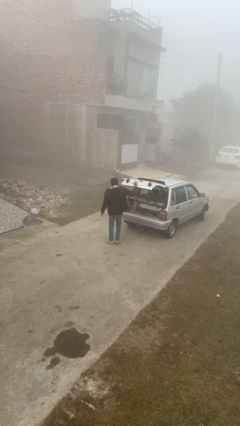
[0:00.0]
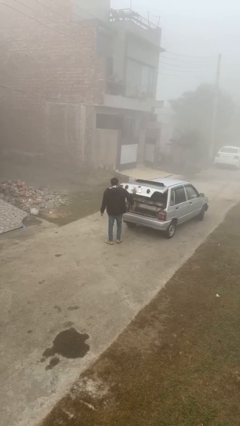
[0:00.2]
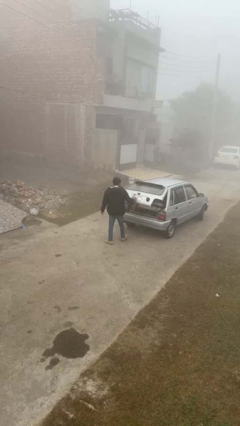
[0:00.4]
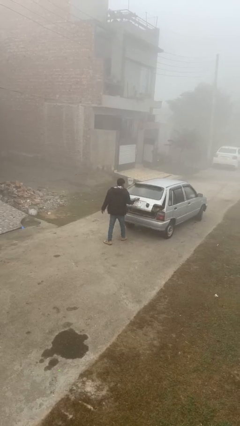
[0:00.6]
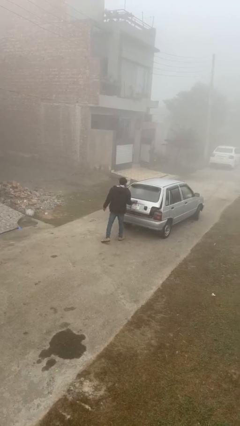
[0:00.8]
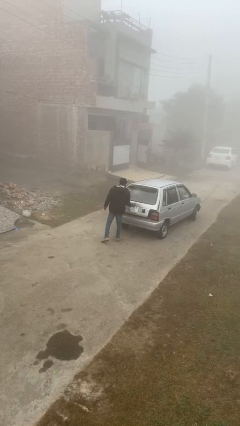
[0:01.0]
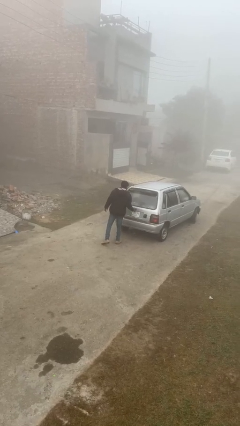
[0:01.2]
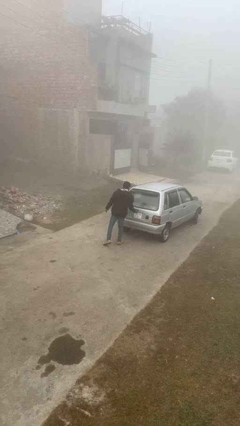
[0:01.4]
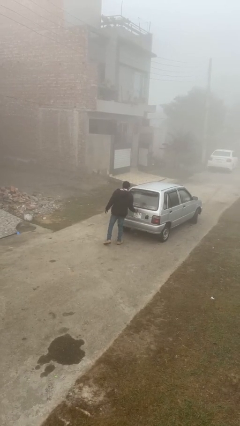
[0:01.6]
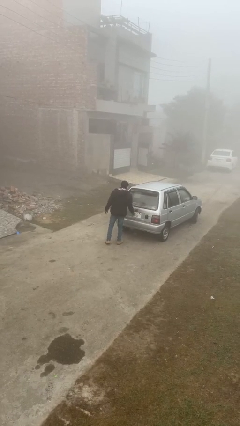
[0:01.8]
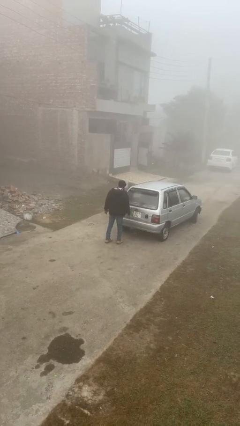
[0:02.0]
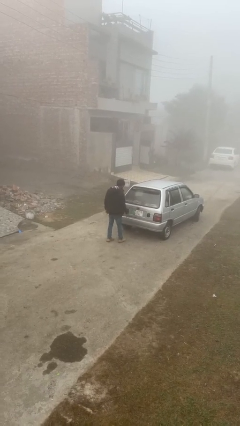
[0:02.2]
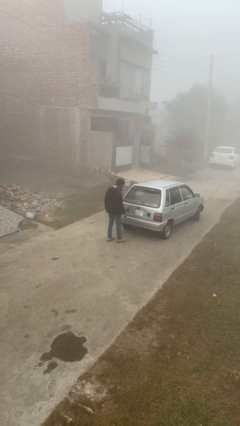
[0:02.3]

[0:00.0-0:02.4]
person closes car trunk

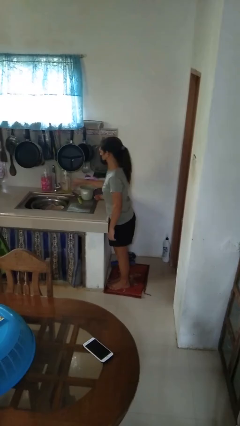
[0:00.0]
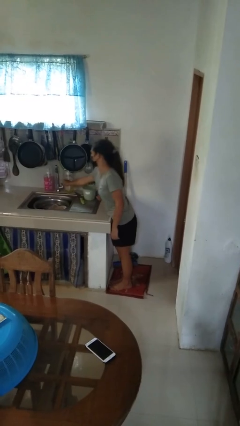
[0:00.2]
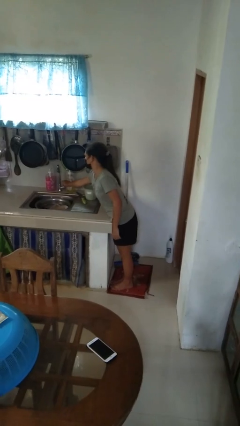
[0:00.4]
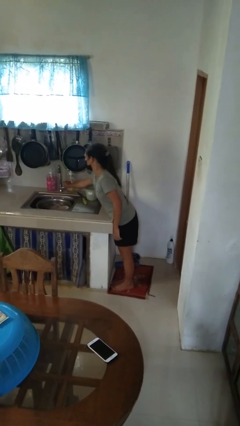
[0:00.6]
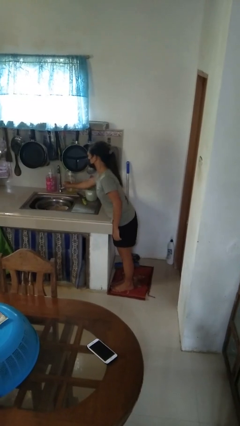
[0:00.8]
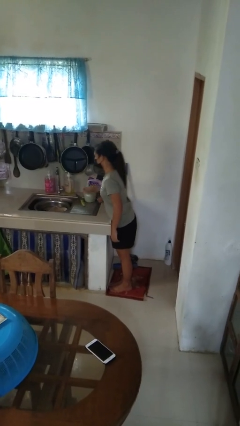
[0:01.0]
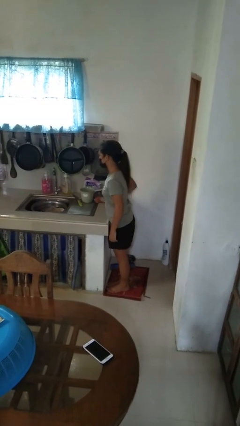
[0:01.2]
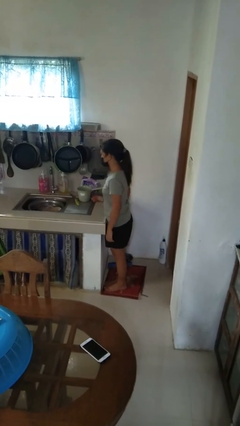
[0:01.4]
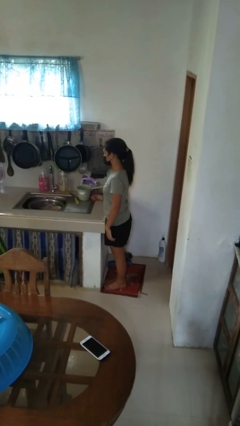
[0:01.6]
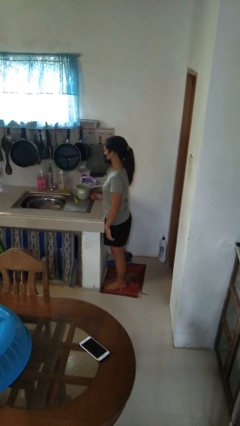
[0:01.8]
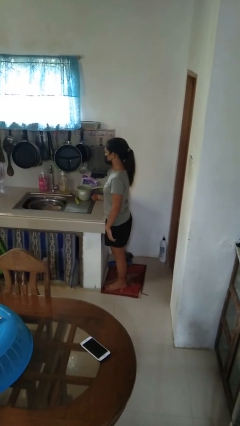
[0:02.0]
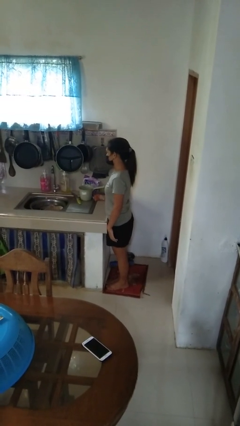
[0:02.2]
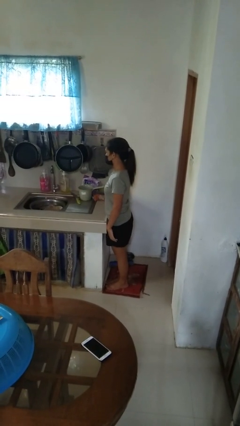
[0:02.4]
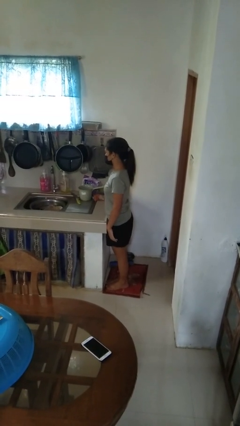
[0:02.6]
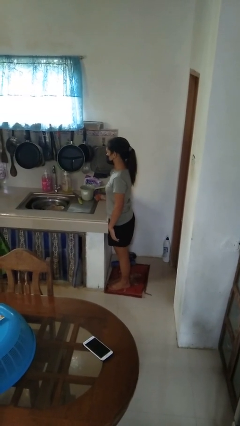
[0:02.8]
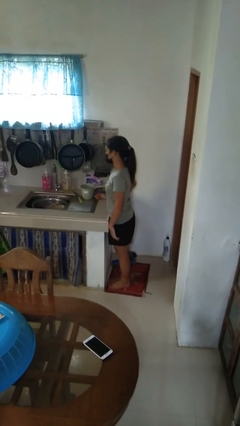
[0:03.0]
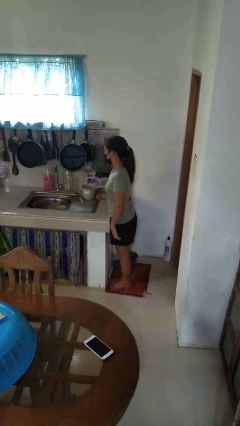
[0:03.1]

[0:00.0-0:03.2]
person turns on faucet

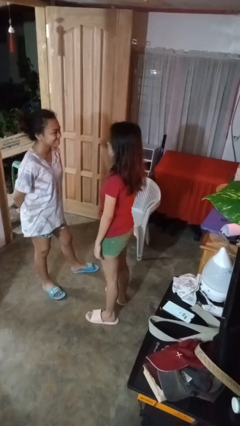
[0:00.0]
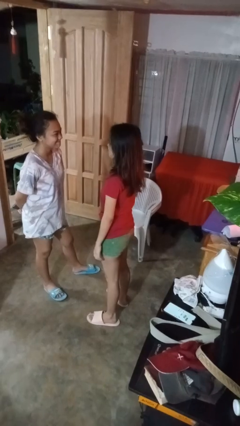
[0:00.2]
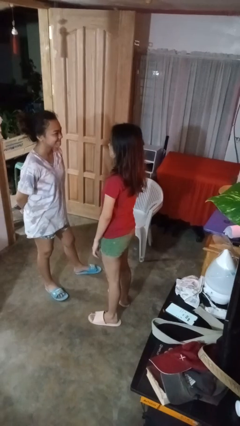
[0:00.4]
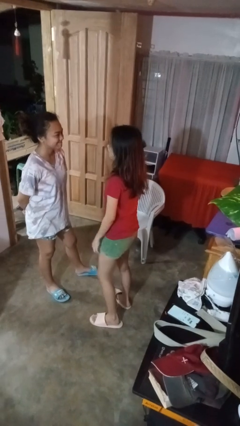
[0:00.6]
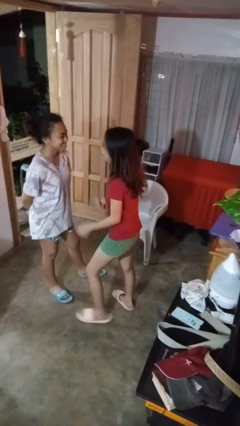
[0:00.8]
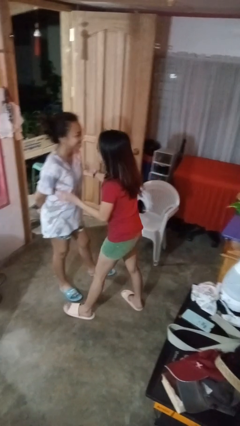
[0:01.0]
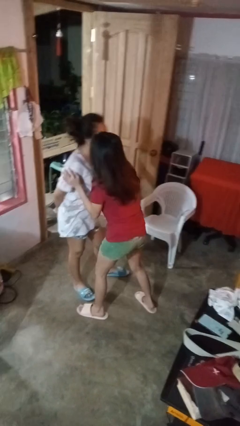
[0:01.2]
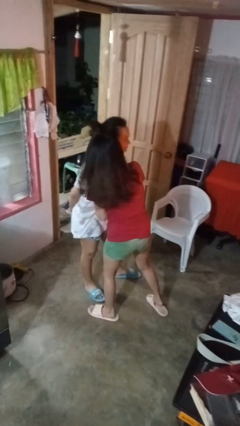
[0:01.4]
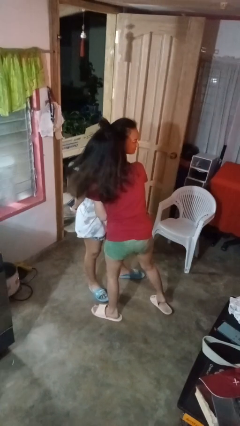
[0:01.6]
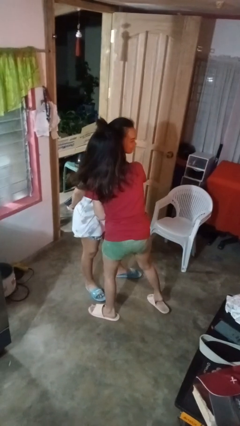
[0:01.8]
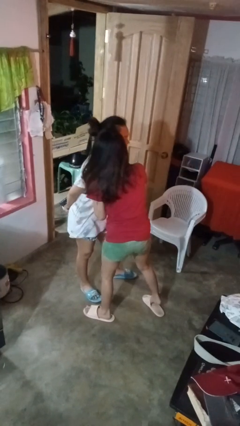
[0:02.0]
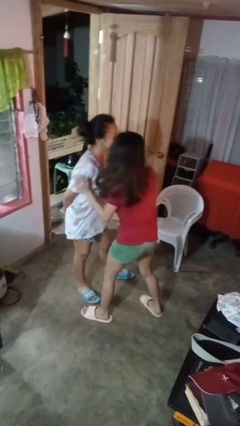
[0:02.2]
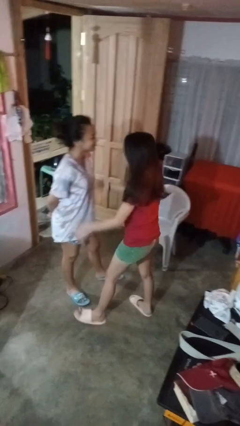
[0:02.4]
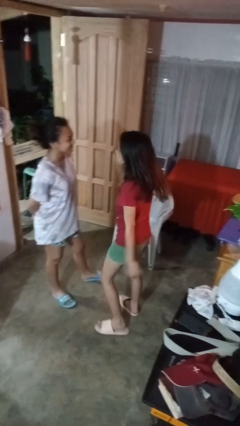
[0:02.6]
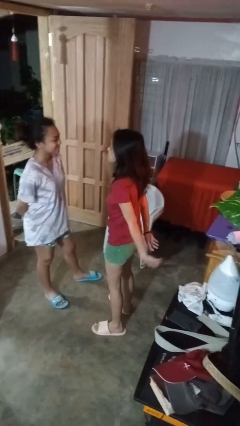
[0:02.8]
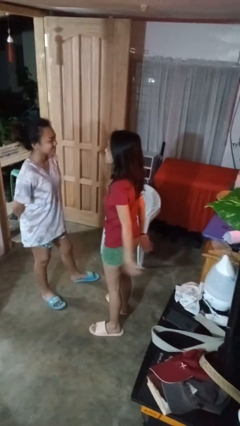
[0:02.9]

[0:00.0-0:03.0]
person kisses cheek of person

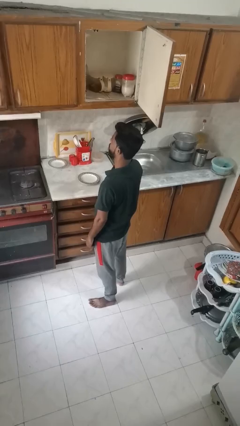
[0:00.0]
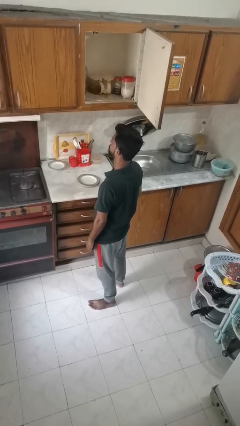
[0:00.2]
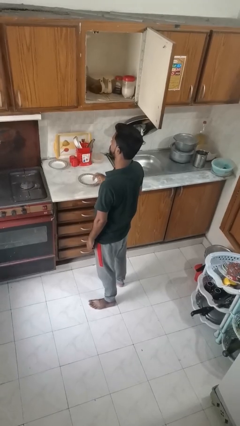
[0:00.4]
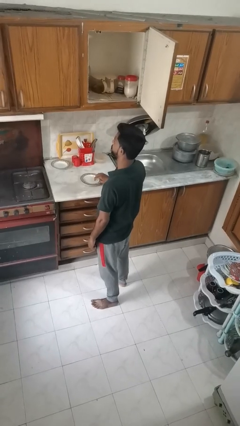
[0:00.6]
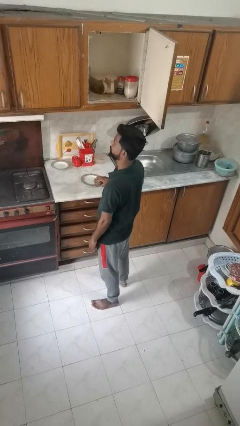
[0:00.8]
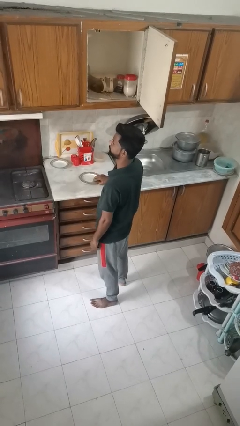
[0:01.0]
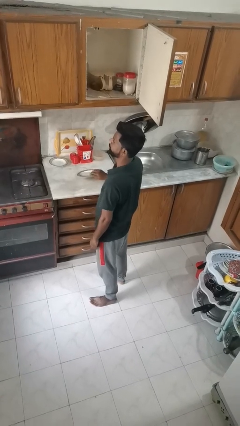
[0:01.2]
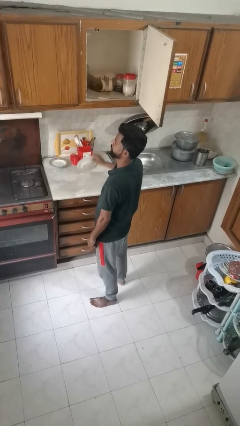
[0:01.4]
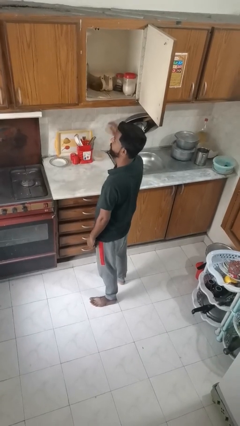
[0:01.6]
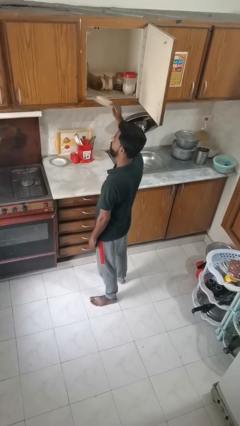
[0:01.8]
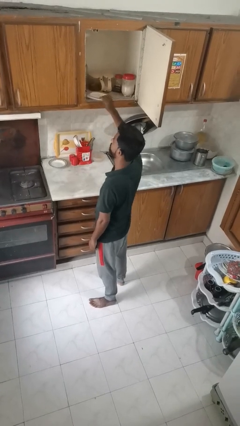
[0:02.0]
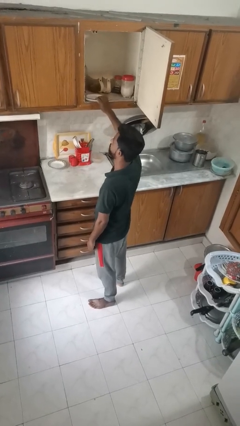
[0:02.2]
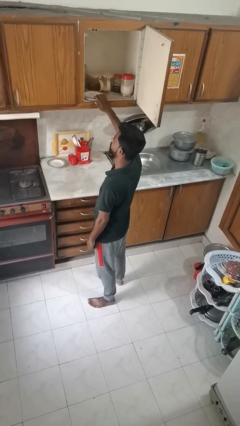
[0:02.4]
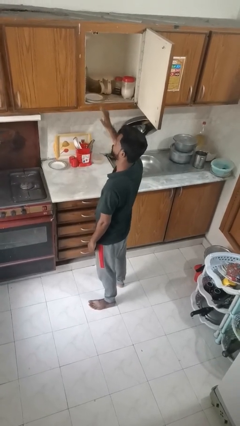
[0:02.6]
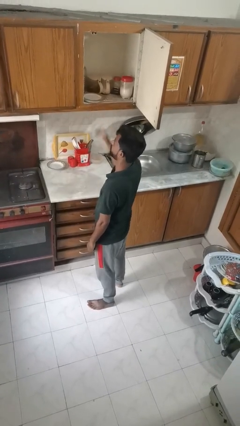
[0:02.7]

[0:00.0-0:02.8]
person puts object in cabinet

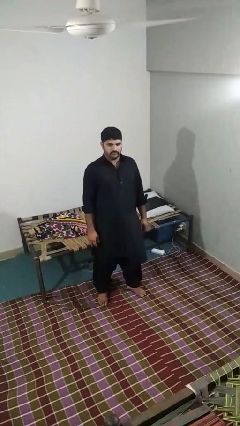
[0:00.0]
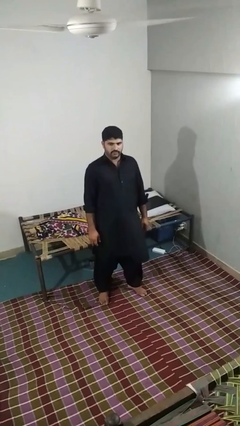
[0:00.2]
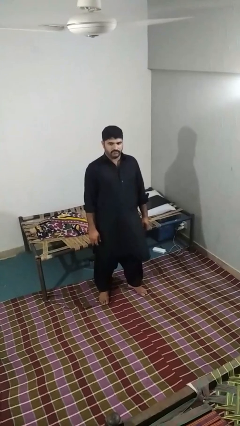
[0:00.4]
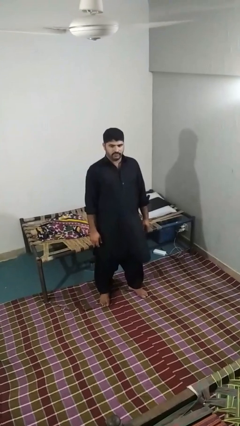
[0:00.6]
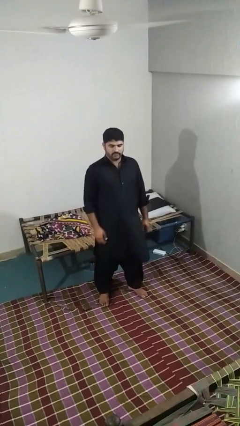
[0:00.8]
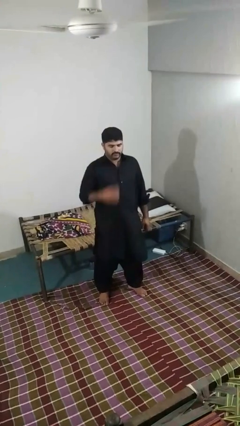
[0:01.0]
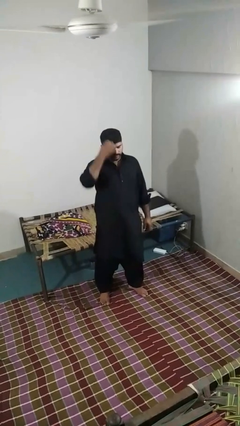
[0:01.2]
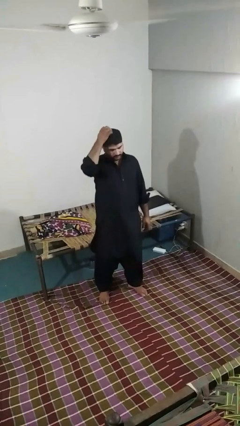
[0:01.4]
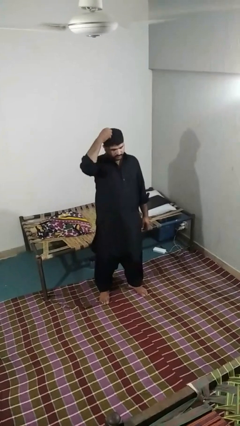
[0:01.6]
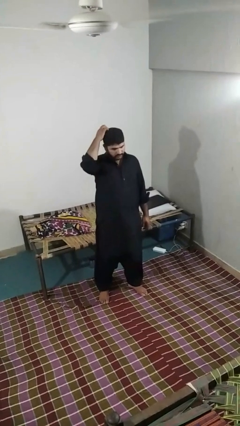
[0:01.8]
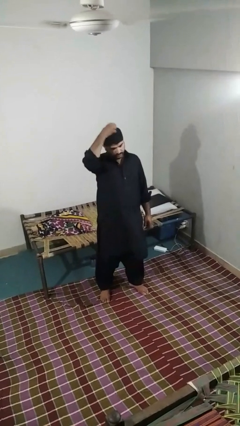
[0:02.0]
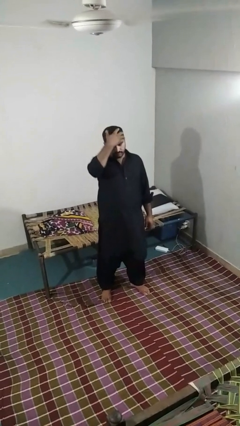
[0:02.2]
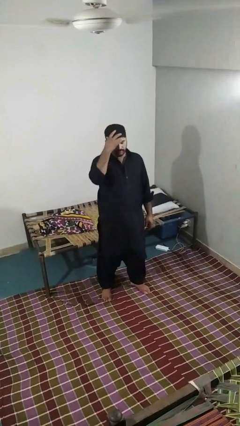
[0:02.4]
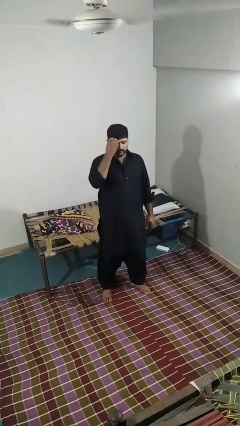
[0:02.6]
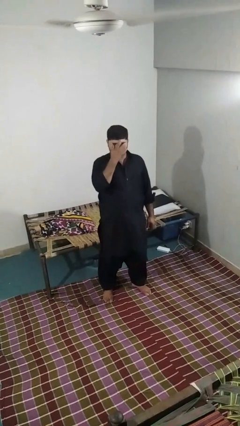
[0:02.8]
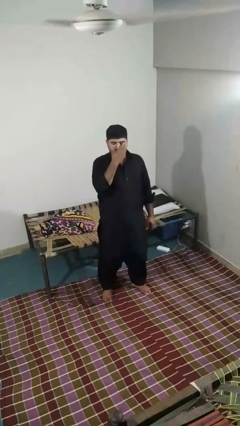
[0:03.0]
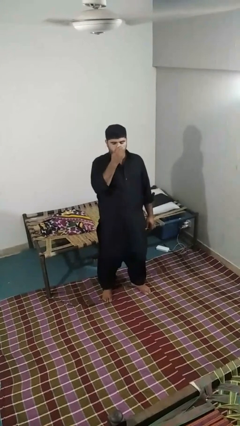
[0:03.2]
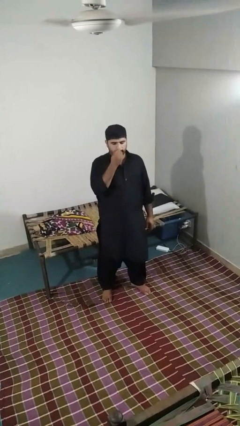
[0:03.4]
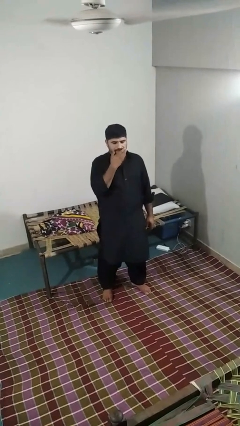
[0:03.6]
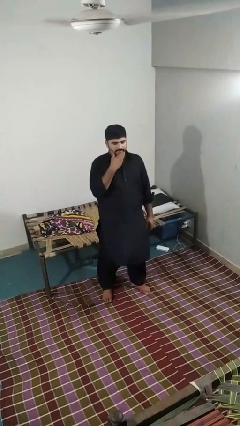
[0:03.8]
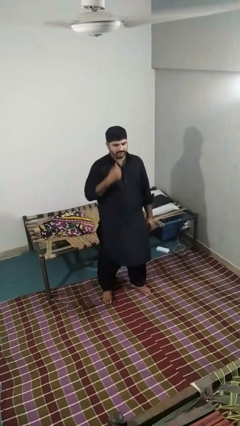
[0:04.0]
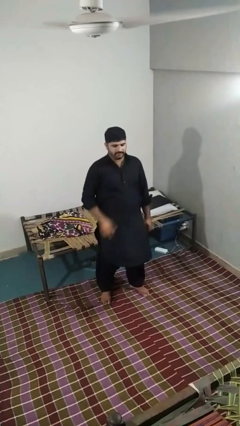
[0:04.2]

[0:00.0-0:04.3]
person scratches face

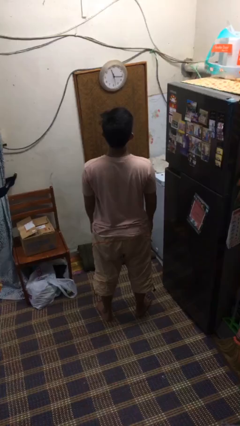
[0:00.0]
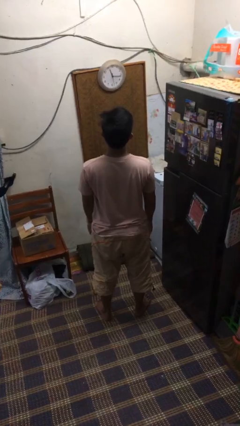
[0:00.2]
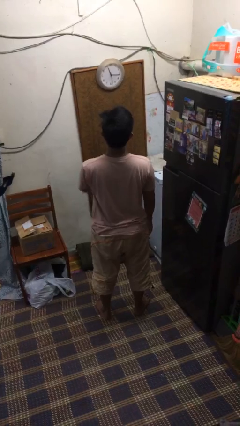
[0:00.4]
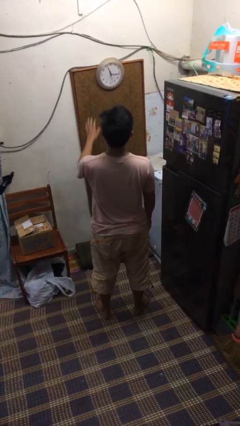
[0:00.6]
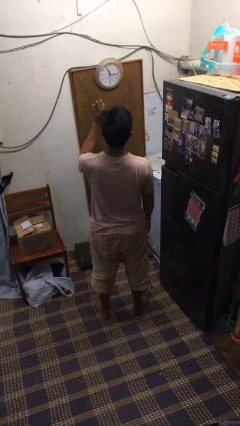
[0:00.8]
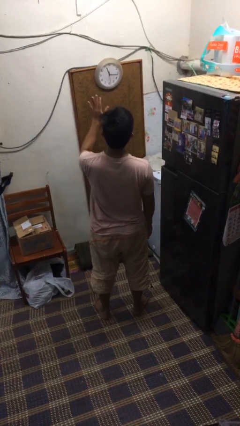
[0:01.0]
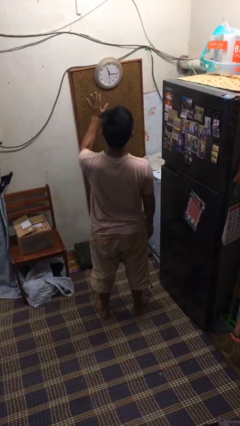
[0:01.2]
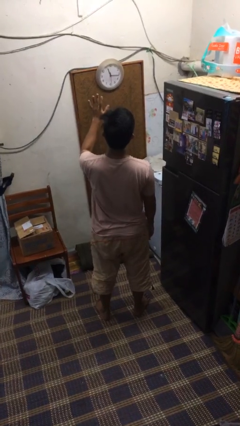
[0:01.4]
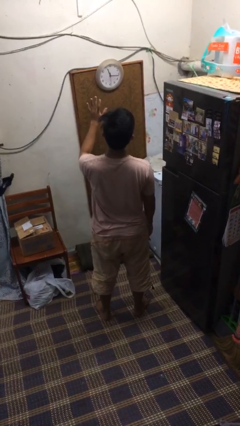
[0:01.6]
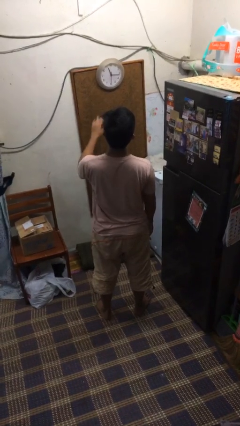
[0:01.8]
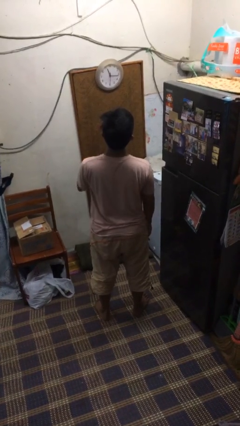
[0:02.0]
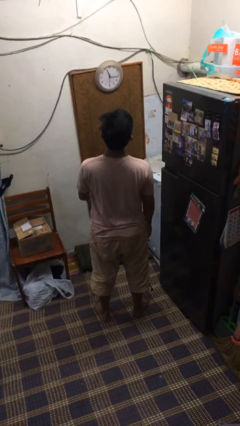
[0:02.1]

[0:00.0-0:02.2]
person gestures stop
